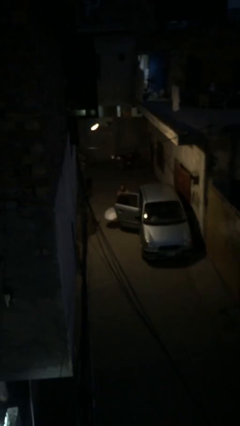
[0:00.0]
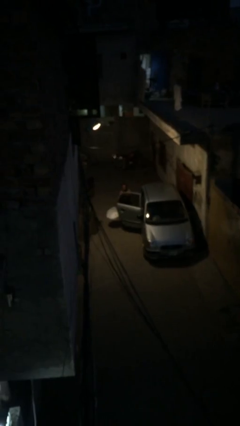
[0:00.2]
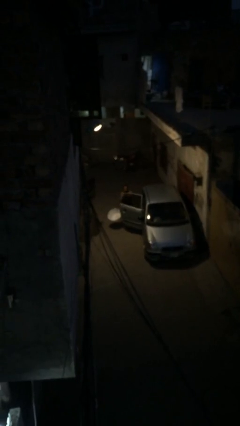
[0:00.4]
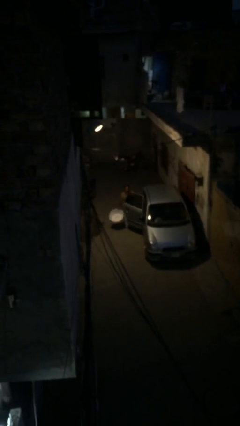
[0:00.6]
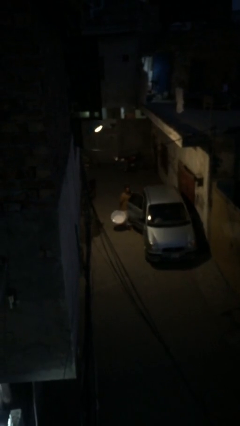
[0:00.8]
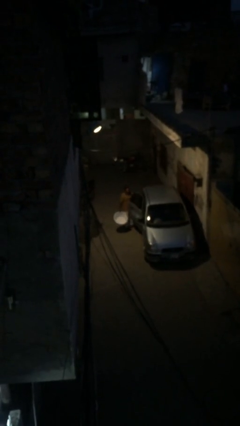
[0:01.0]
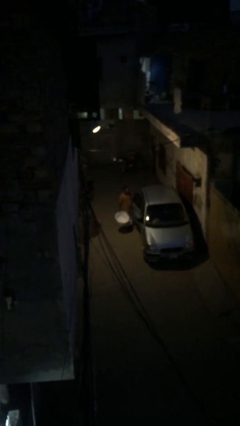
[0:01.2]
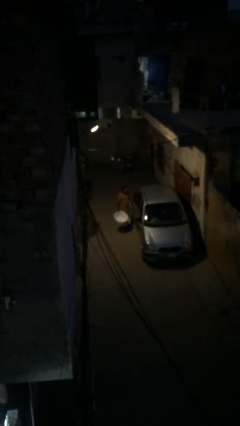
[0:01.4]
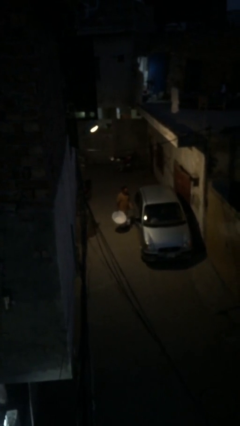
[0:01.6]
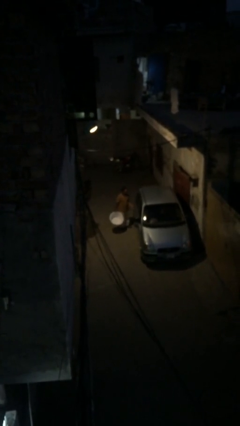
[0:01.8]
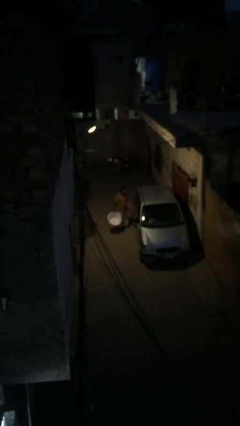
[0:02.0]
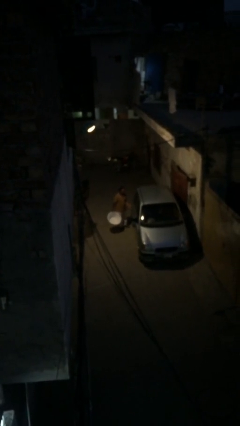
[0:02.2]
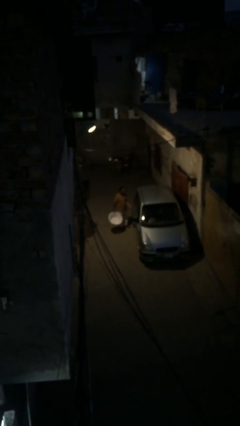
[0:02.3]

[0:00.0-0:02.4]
person closes car door

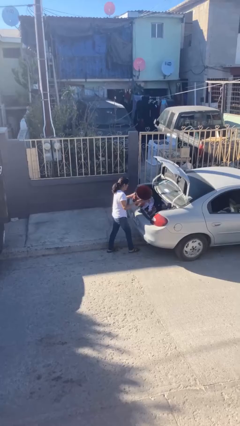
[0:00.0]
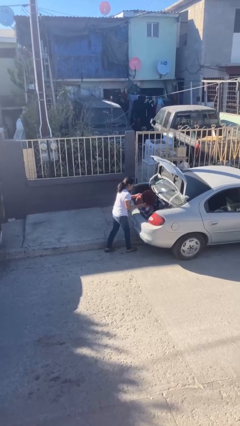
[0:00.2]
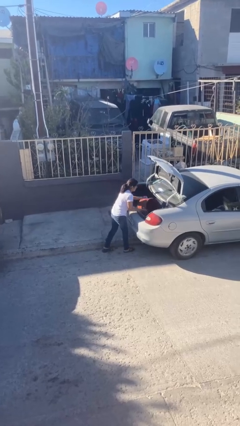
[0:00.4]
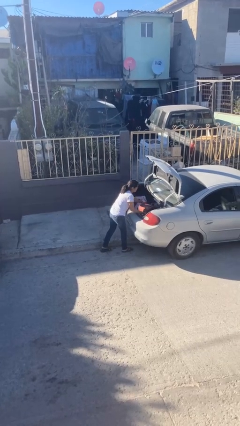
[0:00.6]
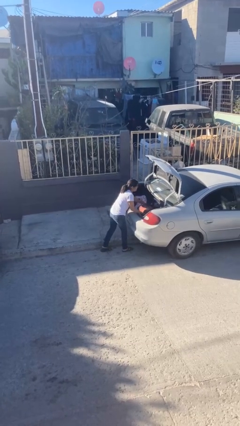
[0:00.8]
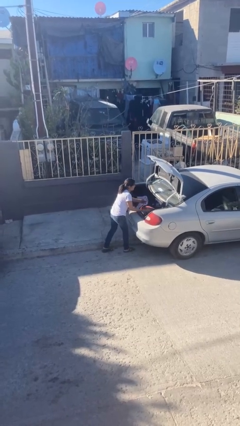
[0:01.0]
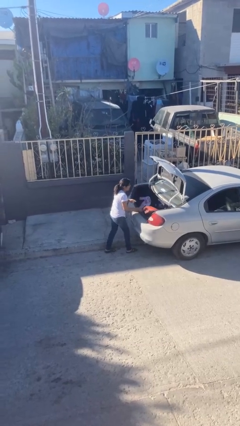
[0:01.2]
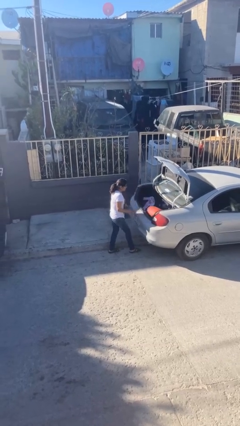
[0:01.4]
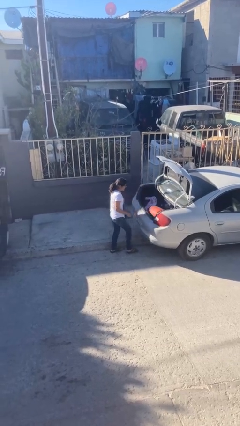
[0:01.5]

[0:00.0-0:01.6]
person loads car

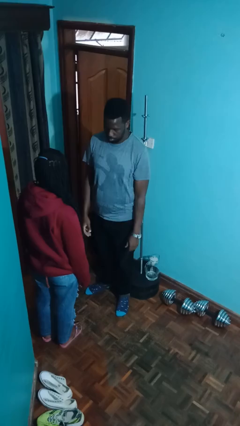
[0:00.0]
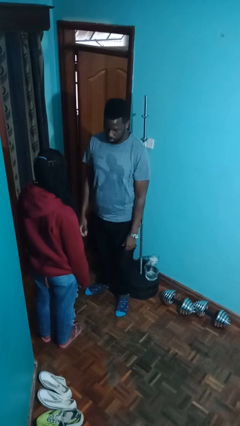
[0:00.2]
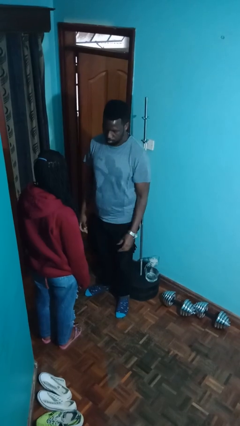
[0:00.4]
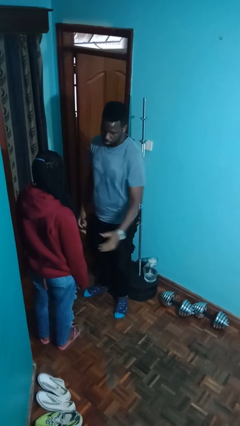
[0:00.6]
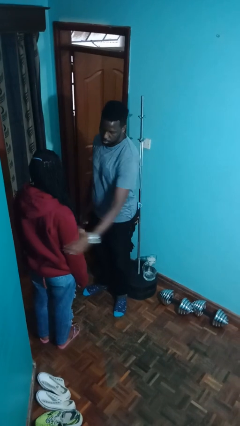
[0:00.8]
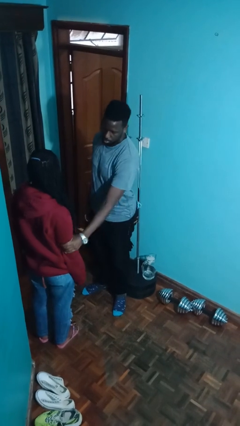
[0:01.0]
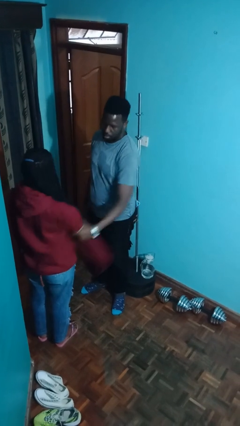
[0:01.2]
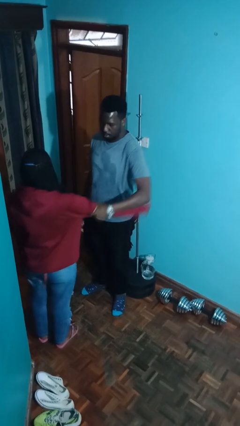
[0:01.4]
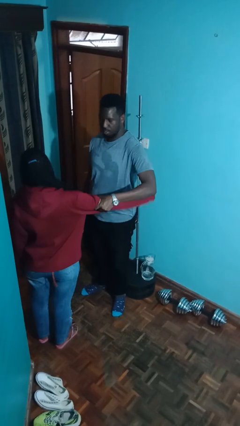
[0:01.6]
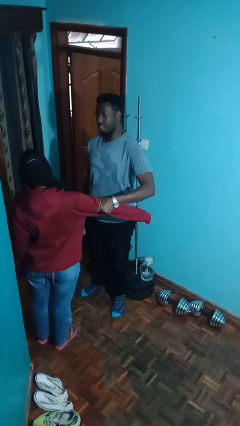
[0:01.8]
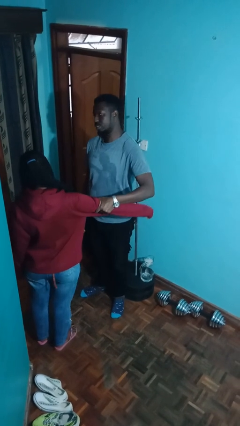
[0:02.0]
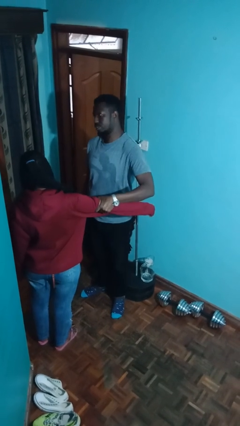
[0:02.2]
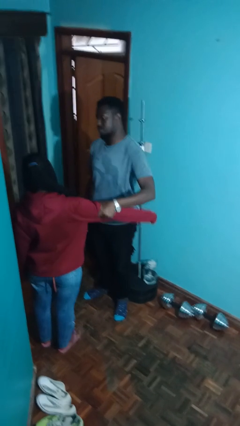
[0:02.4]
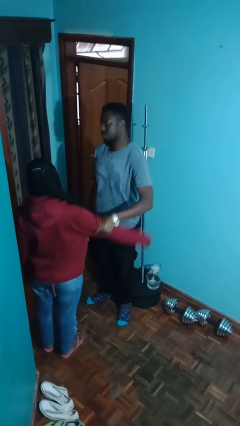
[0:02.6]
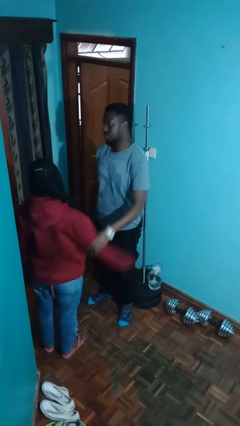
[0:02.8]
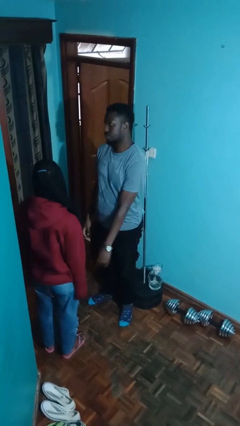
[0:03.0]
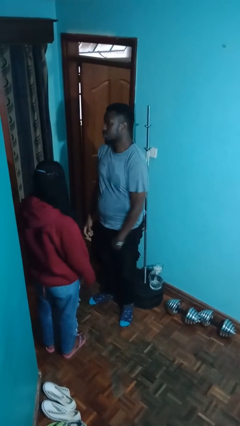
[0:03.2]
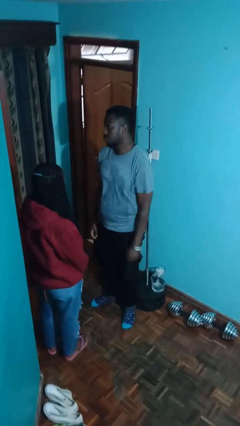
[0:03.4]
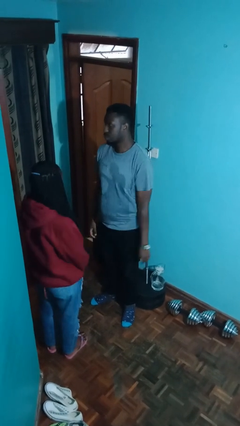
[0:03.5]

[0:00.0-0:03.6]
person grabs person by bicep

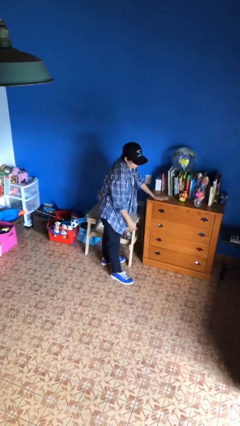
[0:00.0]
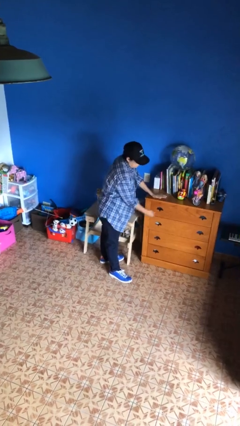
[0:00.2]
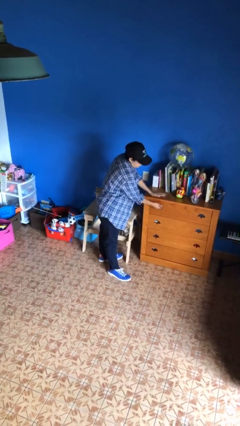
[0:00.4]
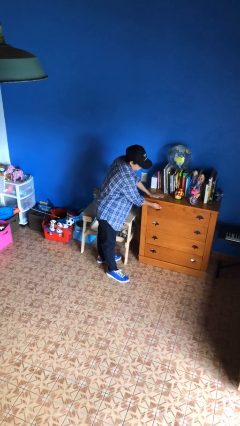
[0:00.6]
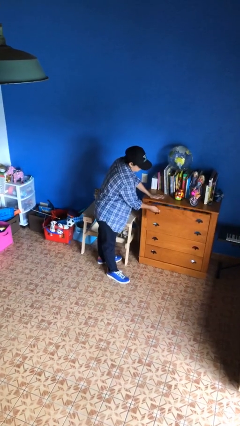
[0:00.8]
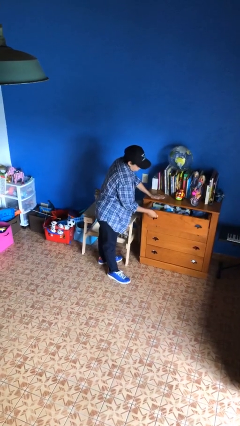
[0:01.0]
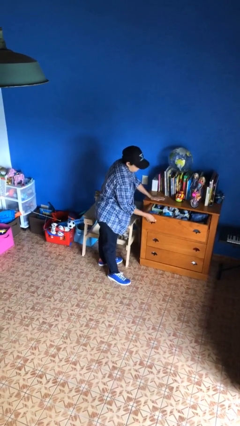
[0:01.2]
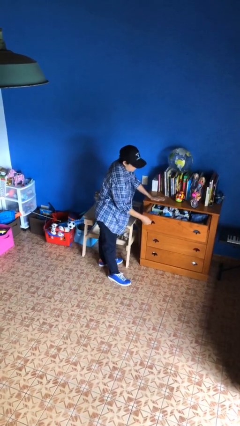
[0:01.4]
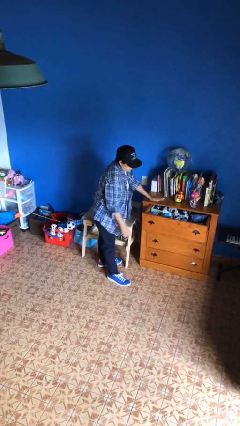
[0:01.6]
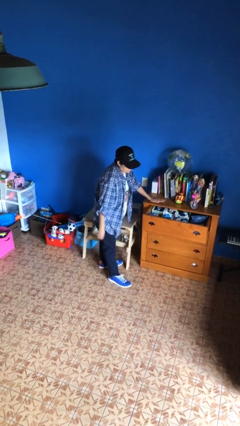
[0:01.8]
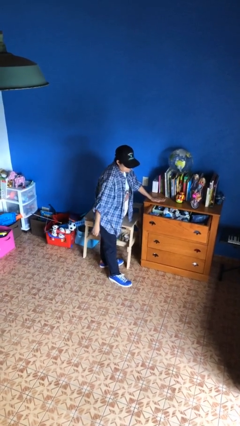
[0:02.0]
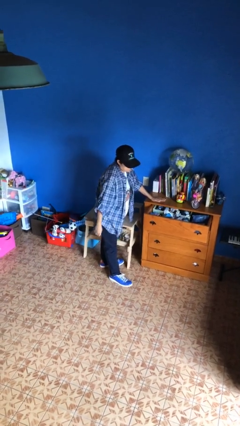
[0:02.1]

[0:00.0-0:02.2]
person opens dresser drawer

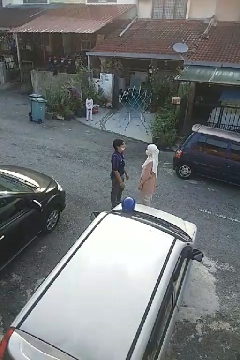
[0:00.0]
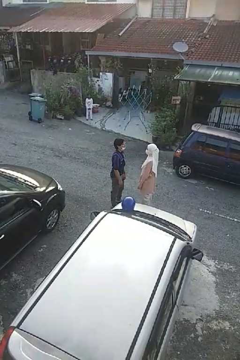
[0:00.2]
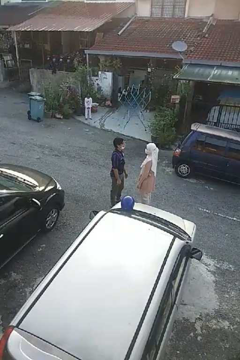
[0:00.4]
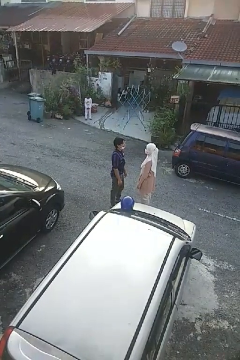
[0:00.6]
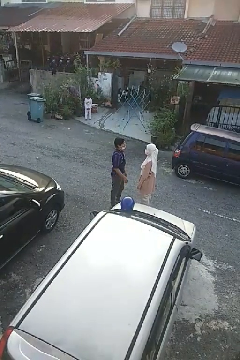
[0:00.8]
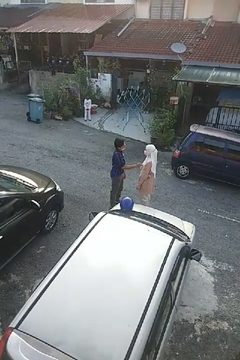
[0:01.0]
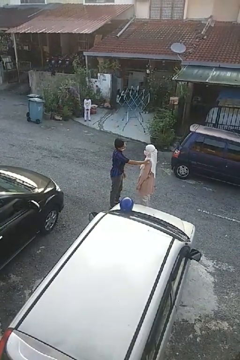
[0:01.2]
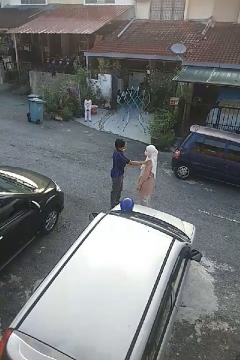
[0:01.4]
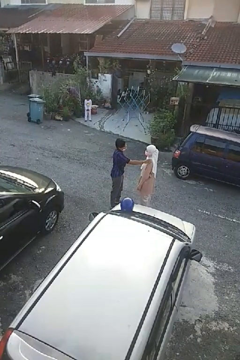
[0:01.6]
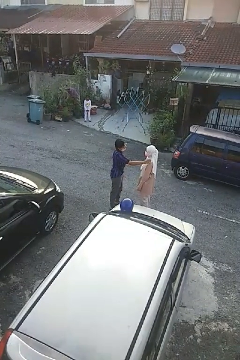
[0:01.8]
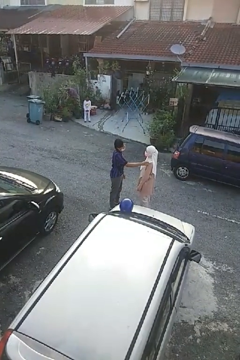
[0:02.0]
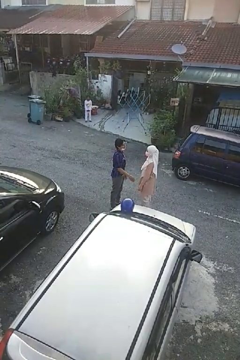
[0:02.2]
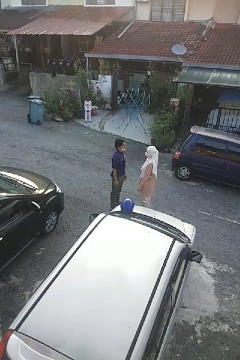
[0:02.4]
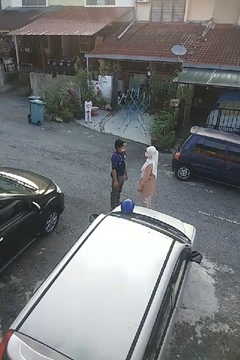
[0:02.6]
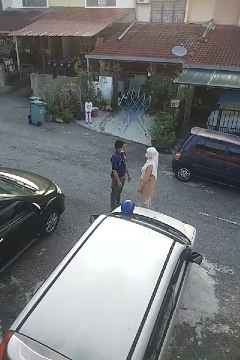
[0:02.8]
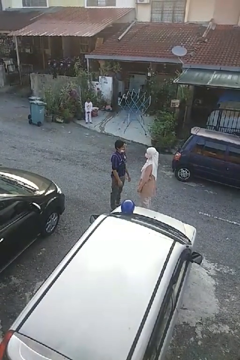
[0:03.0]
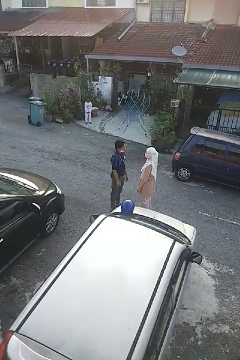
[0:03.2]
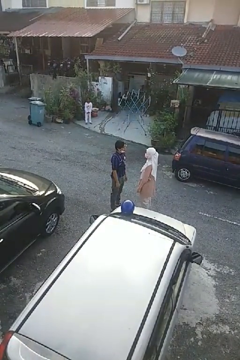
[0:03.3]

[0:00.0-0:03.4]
person pounds shoulders of person

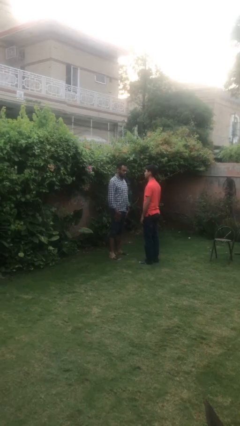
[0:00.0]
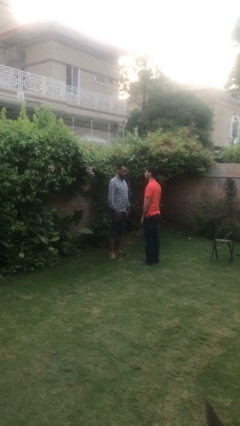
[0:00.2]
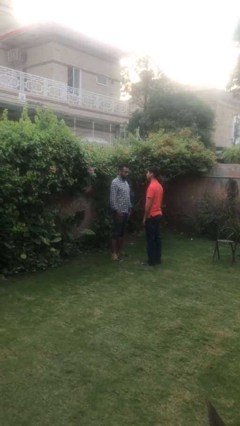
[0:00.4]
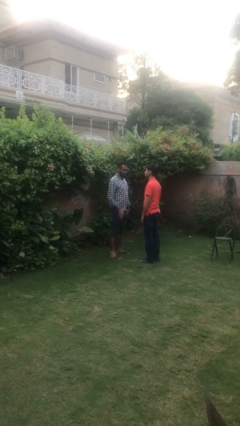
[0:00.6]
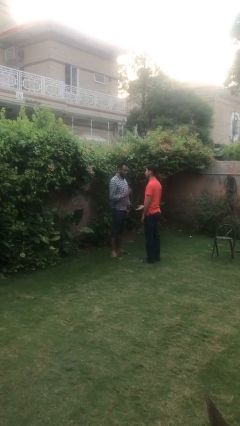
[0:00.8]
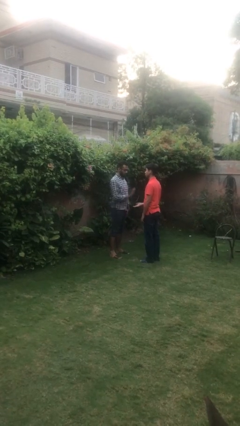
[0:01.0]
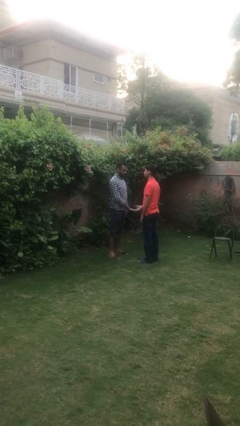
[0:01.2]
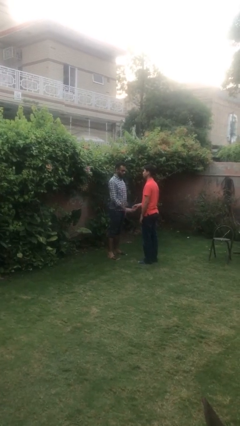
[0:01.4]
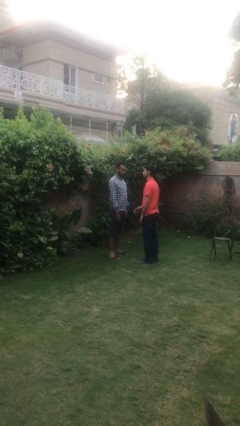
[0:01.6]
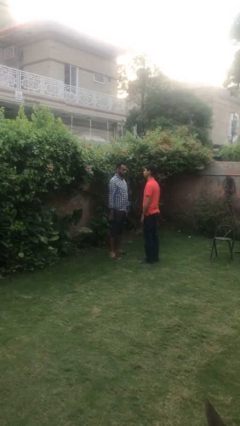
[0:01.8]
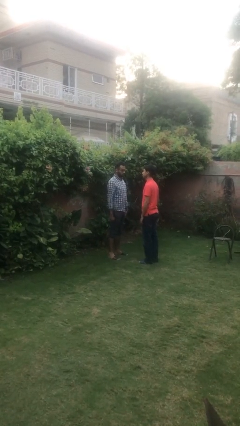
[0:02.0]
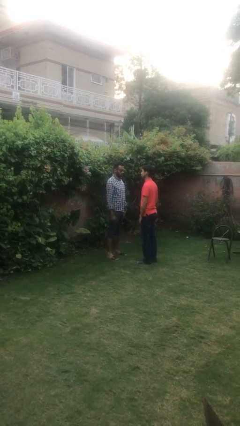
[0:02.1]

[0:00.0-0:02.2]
person highfives hand

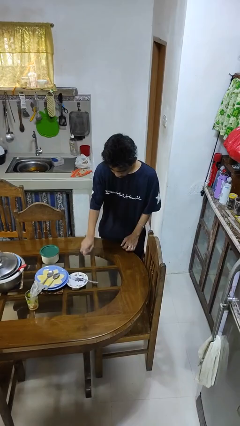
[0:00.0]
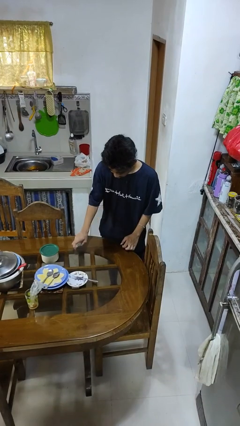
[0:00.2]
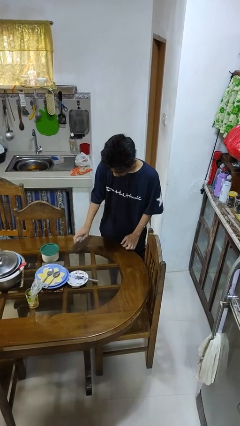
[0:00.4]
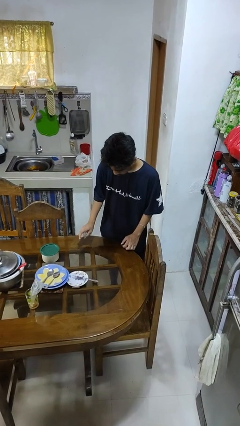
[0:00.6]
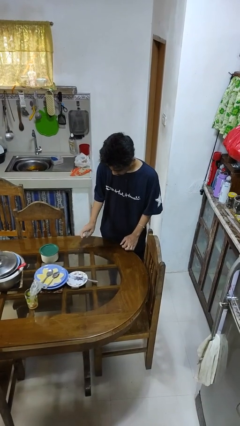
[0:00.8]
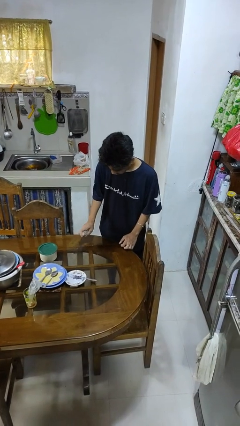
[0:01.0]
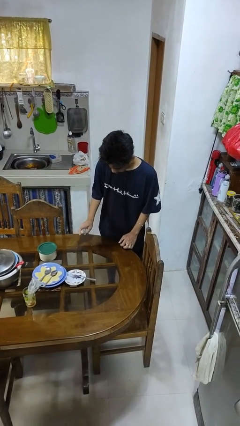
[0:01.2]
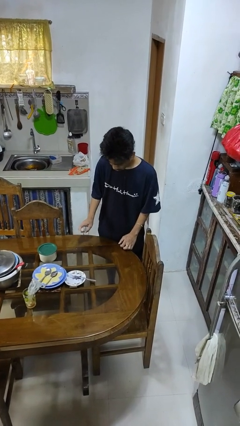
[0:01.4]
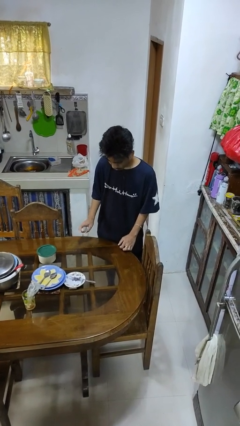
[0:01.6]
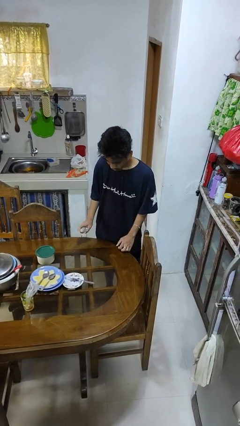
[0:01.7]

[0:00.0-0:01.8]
person sprays from bottle

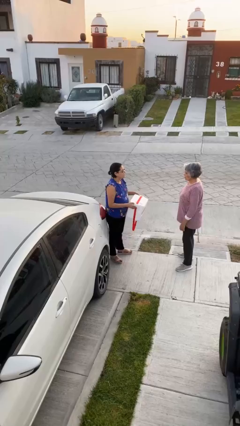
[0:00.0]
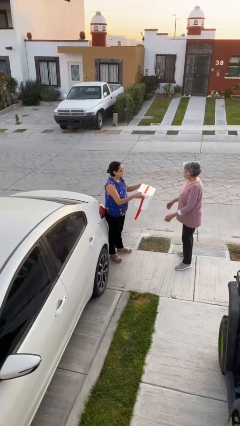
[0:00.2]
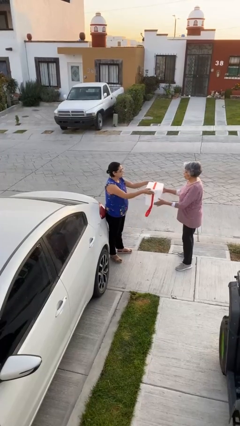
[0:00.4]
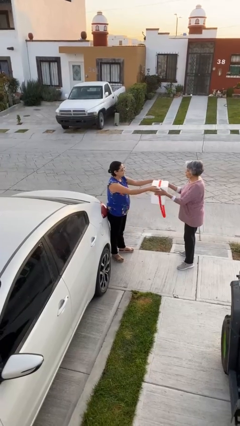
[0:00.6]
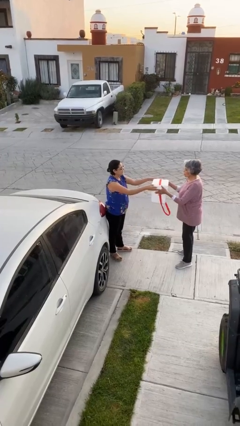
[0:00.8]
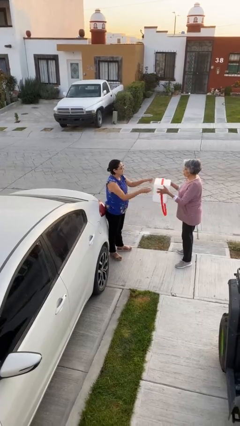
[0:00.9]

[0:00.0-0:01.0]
person transfers object to person
